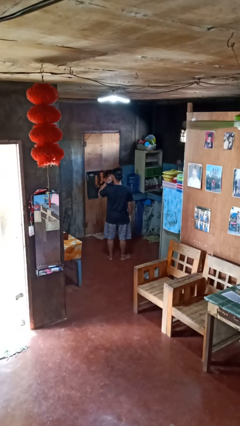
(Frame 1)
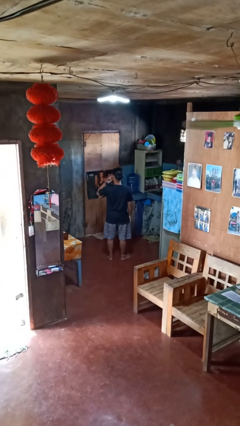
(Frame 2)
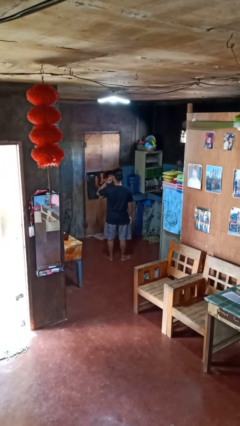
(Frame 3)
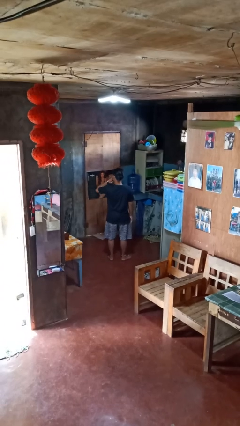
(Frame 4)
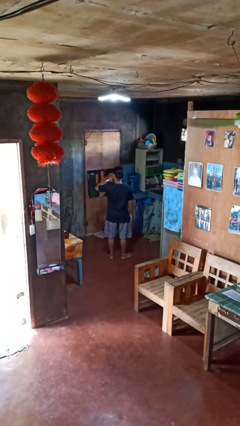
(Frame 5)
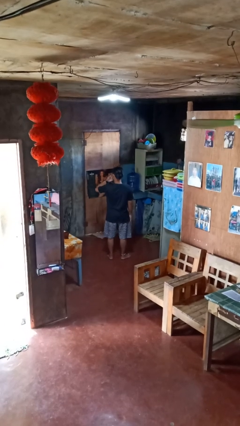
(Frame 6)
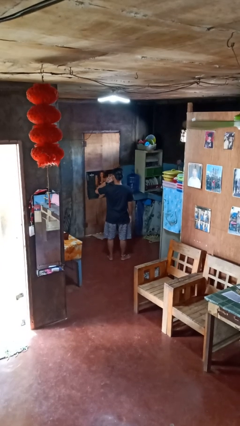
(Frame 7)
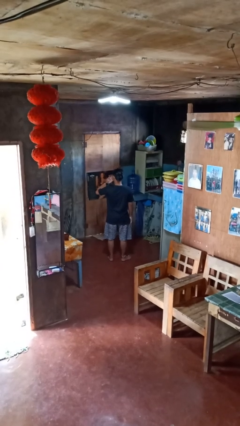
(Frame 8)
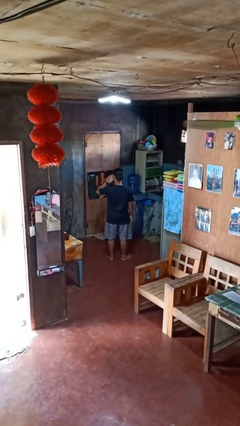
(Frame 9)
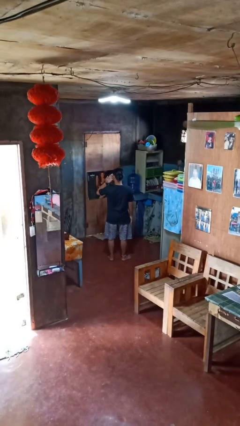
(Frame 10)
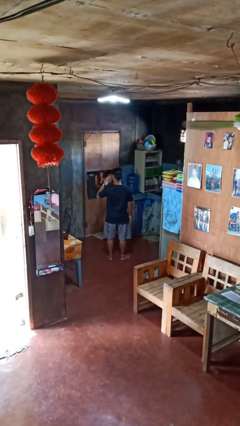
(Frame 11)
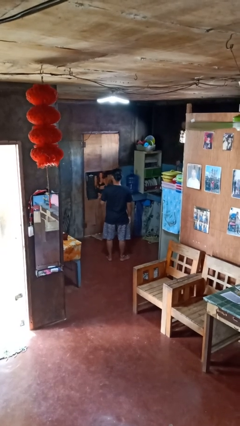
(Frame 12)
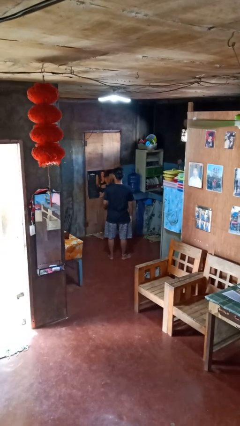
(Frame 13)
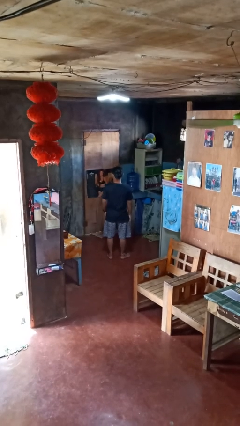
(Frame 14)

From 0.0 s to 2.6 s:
person licks fingers

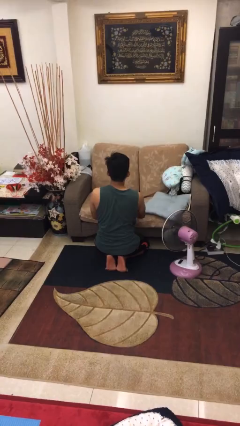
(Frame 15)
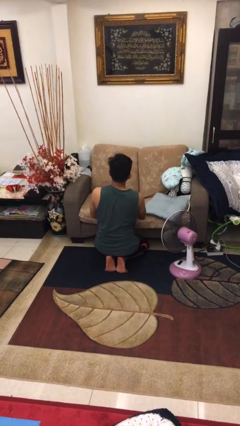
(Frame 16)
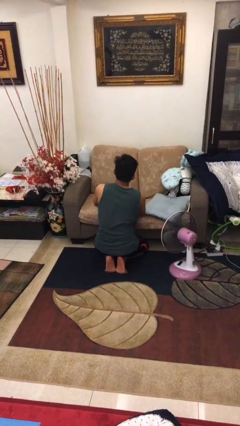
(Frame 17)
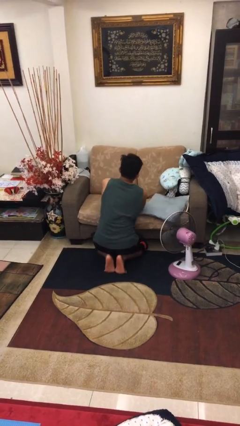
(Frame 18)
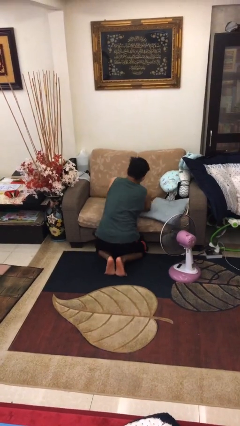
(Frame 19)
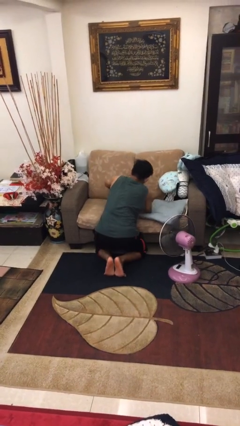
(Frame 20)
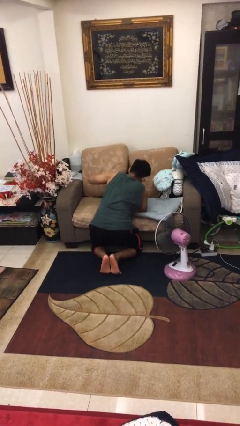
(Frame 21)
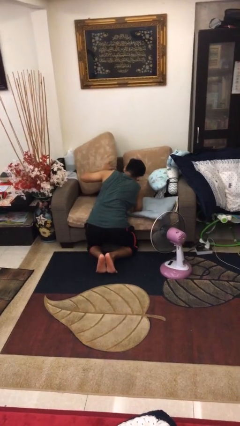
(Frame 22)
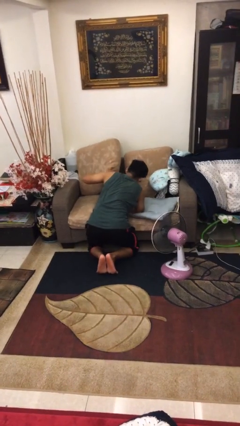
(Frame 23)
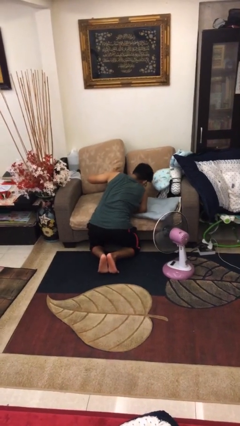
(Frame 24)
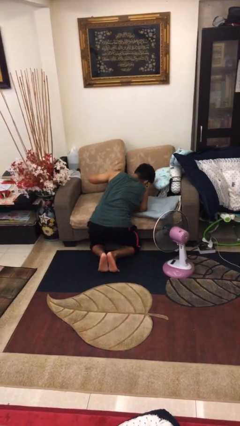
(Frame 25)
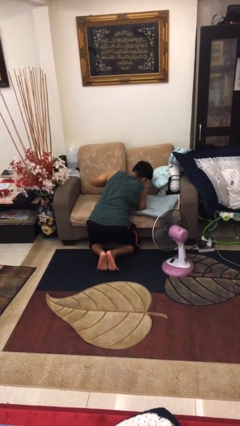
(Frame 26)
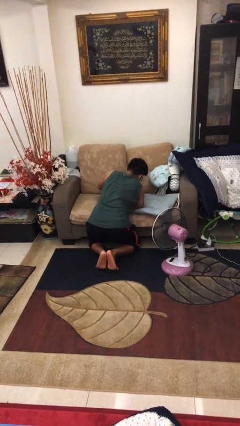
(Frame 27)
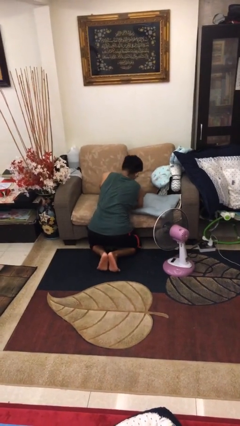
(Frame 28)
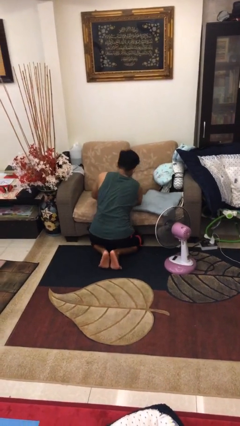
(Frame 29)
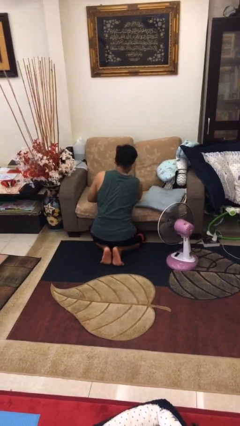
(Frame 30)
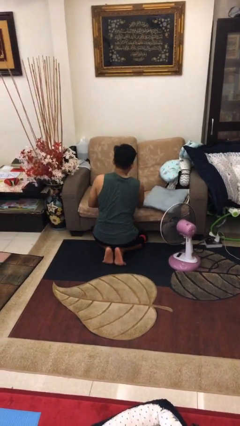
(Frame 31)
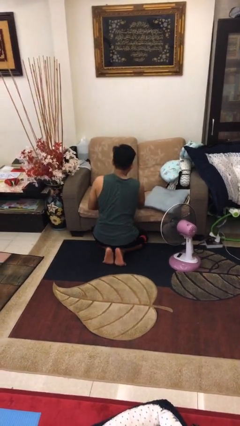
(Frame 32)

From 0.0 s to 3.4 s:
person searches in couch

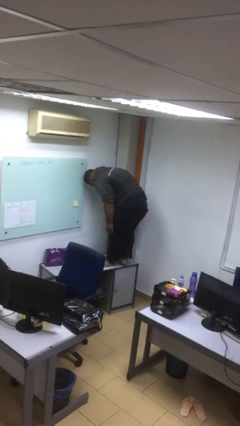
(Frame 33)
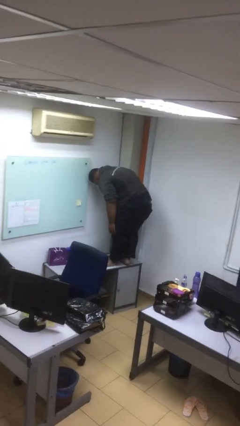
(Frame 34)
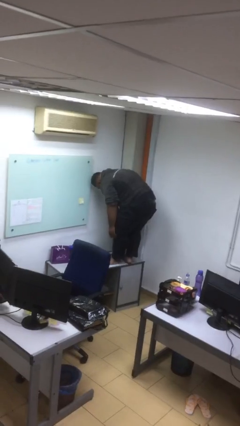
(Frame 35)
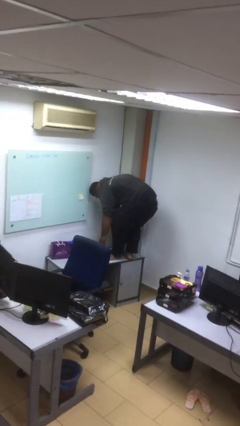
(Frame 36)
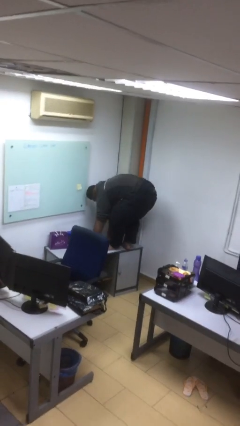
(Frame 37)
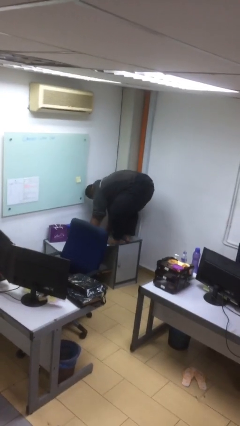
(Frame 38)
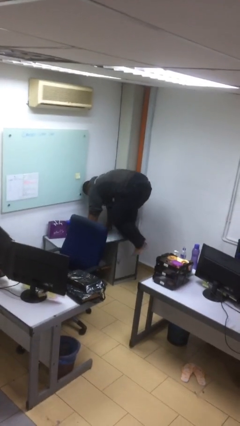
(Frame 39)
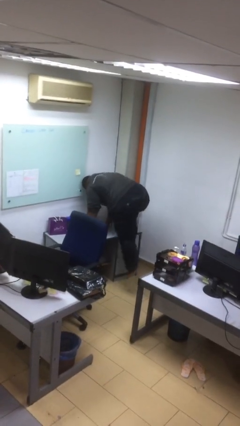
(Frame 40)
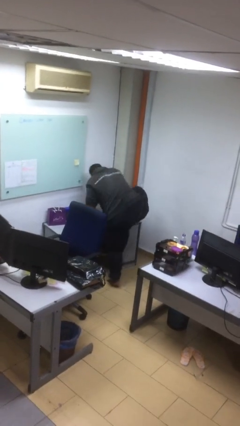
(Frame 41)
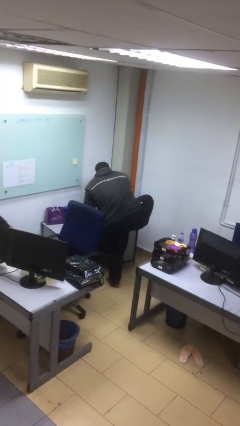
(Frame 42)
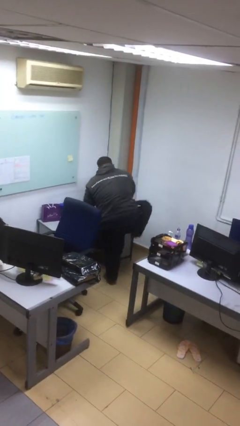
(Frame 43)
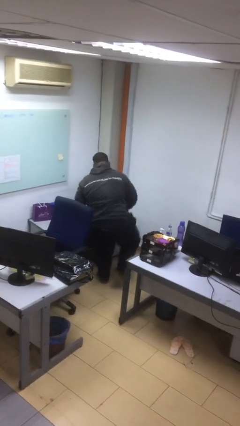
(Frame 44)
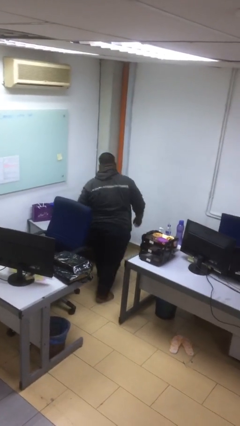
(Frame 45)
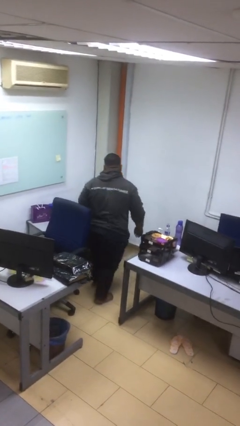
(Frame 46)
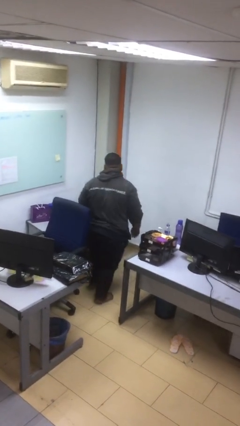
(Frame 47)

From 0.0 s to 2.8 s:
person climbs off table

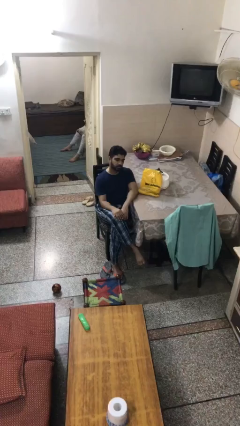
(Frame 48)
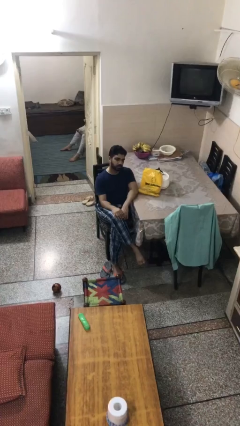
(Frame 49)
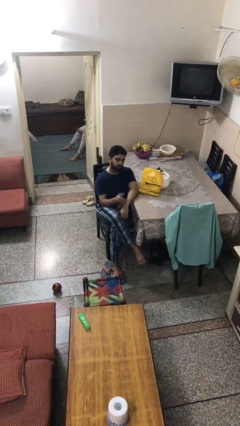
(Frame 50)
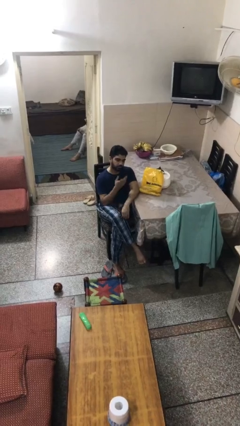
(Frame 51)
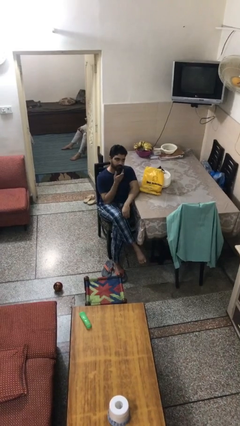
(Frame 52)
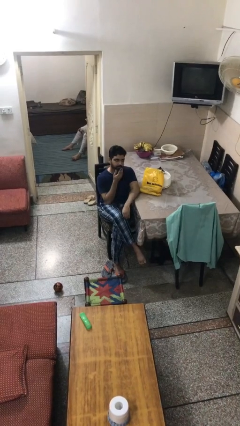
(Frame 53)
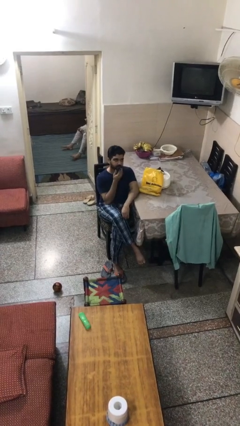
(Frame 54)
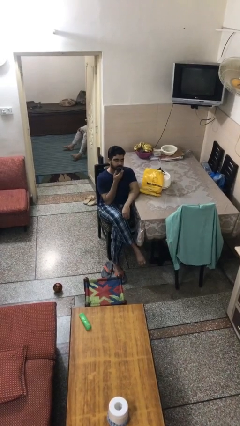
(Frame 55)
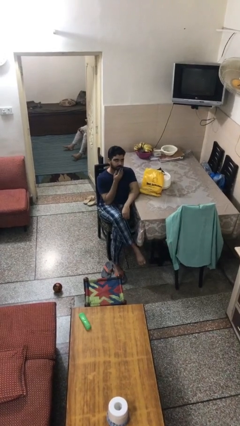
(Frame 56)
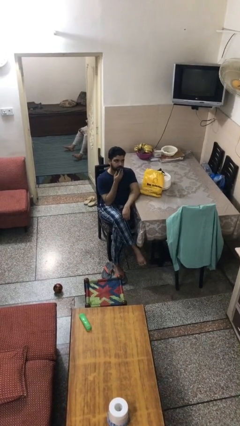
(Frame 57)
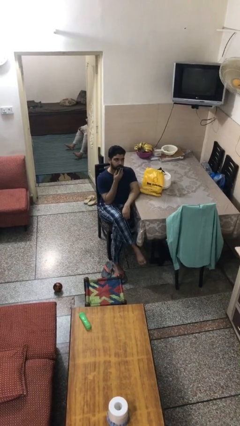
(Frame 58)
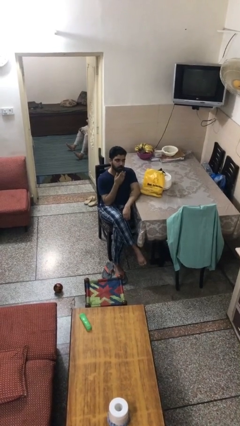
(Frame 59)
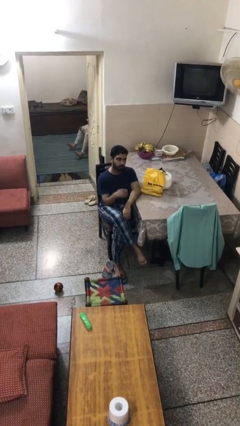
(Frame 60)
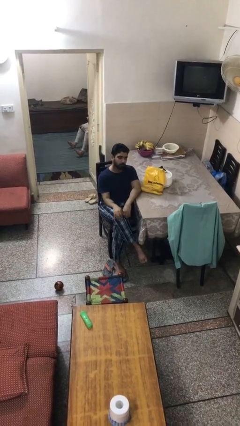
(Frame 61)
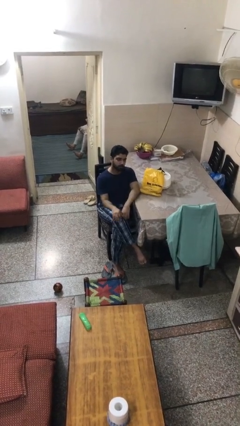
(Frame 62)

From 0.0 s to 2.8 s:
person strokes chin

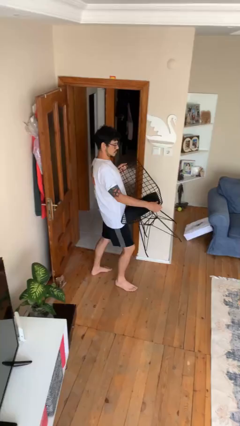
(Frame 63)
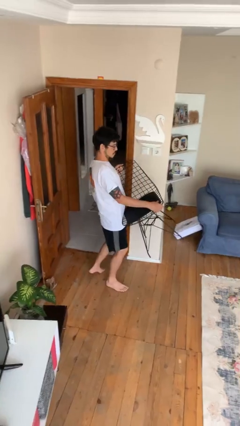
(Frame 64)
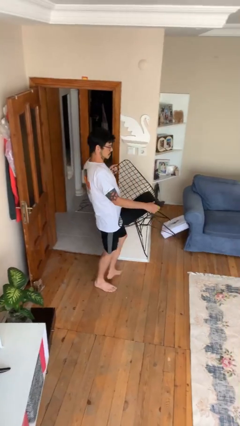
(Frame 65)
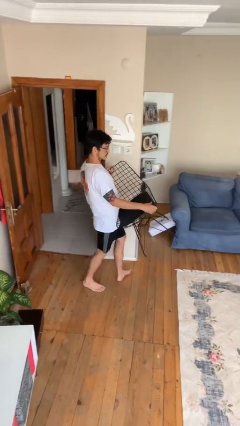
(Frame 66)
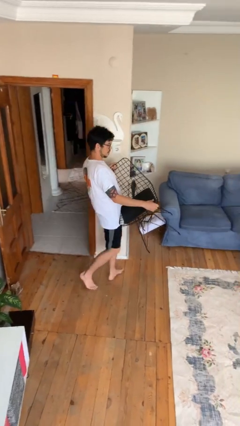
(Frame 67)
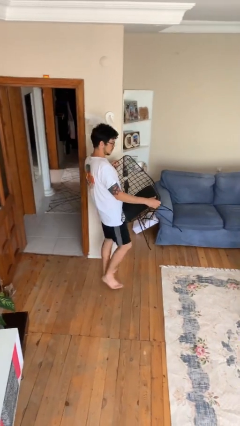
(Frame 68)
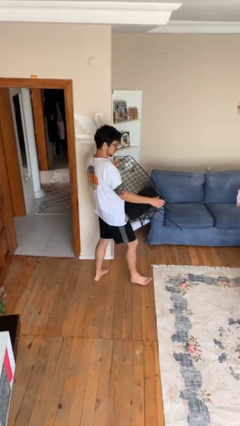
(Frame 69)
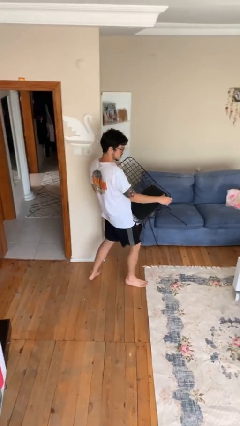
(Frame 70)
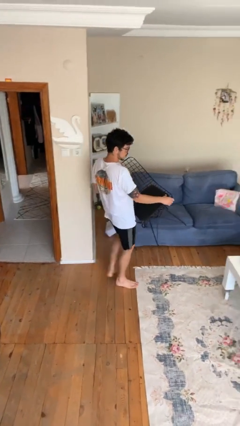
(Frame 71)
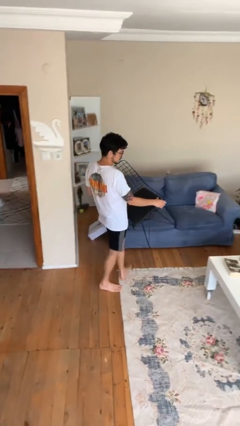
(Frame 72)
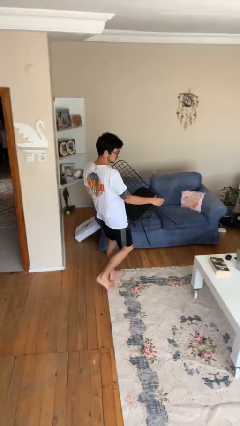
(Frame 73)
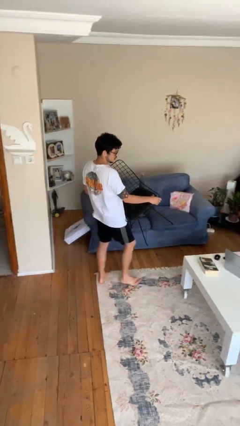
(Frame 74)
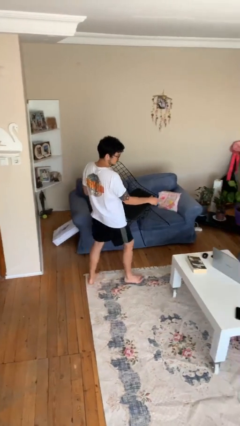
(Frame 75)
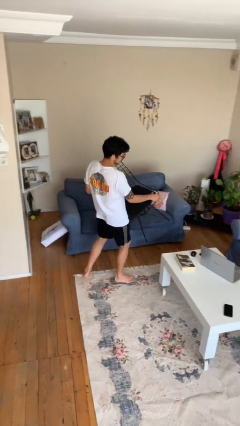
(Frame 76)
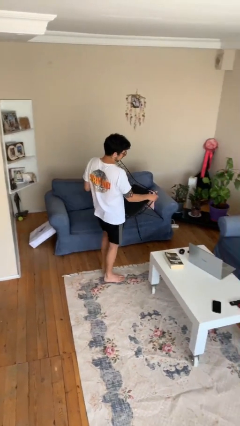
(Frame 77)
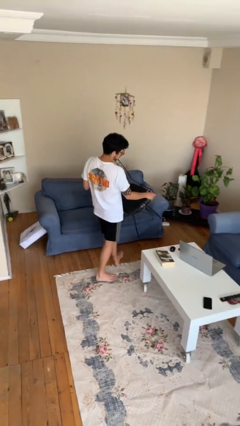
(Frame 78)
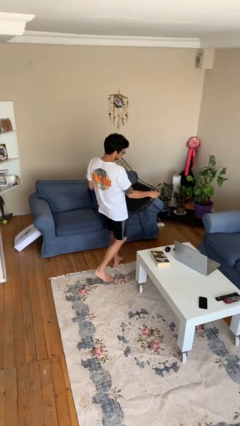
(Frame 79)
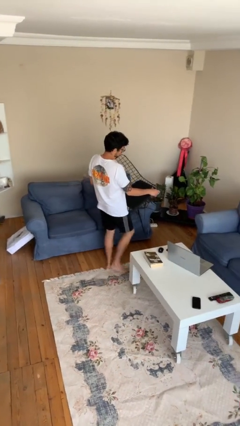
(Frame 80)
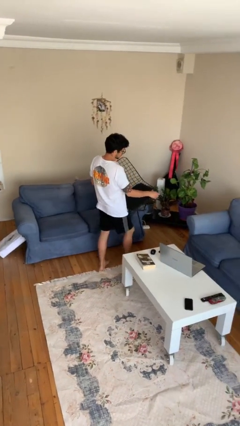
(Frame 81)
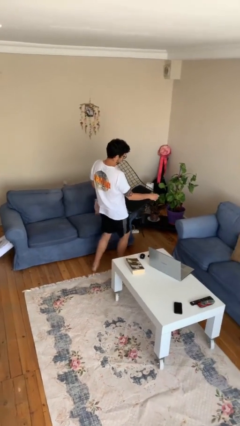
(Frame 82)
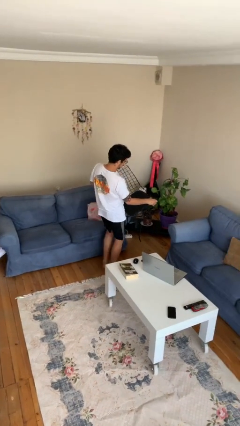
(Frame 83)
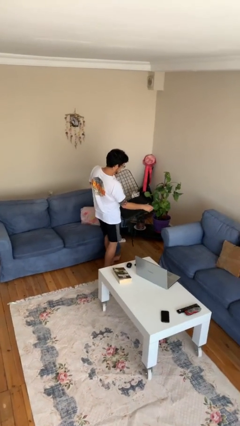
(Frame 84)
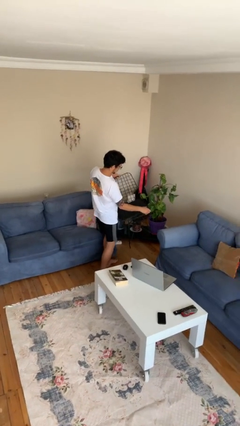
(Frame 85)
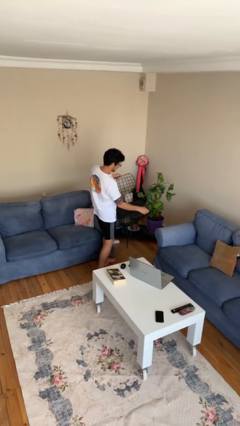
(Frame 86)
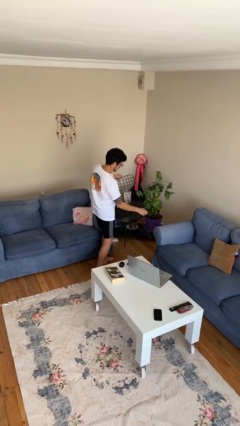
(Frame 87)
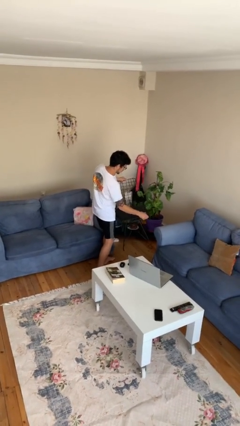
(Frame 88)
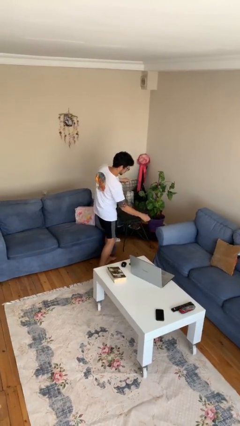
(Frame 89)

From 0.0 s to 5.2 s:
person carries heavy object

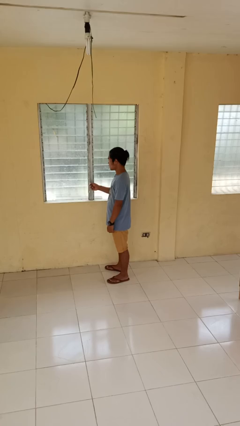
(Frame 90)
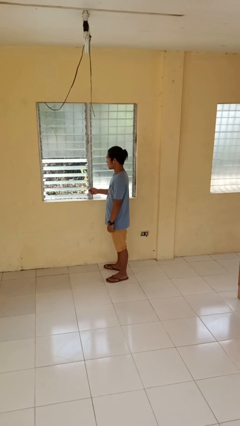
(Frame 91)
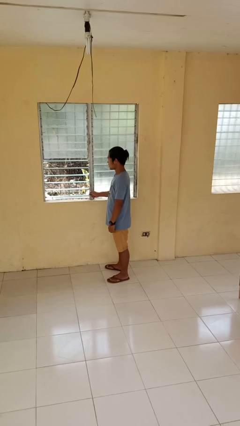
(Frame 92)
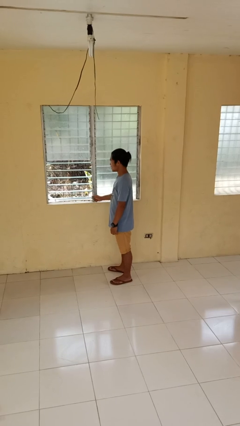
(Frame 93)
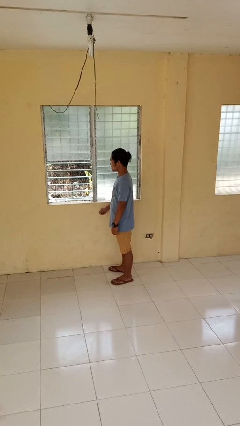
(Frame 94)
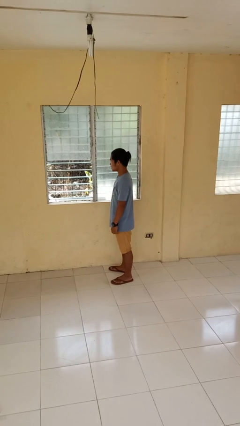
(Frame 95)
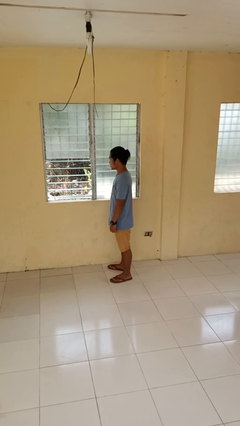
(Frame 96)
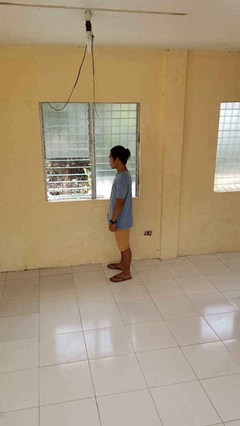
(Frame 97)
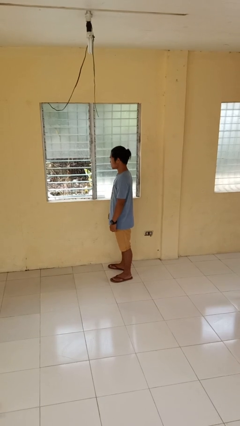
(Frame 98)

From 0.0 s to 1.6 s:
person opens home window
